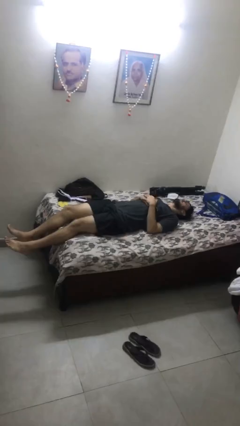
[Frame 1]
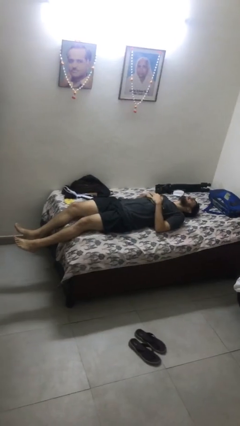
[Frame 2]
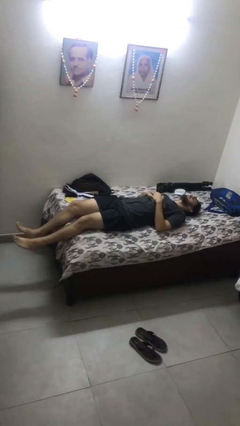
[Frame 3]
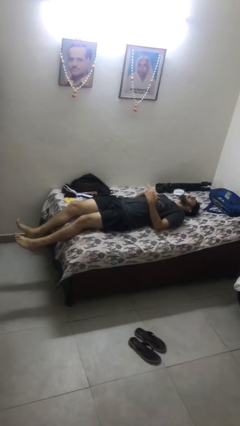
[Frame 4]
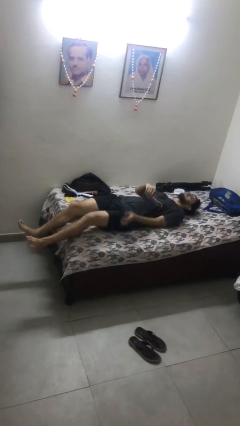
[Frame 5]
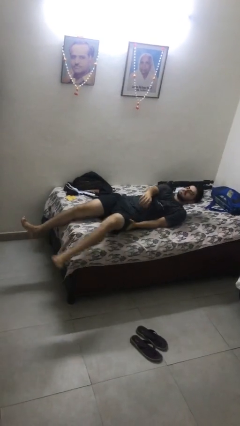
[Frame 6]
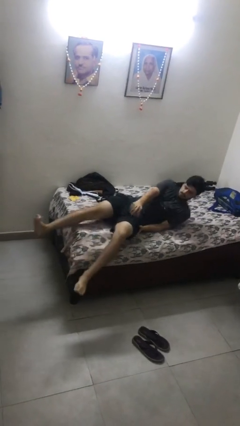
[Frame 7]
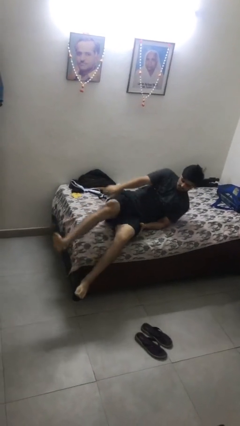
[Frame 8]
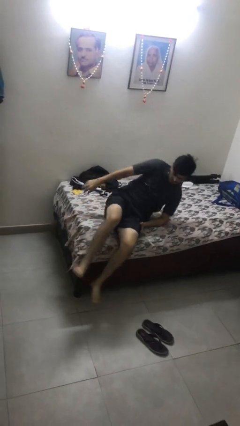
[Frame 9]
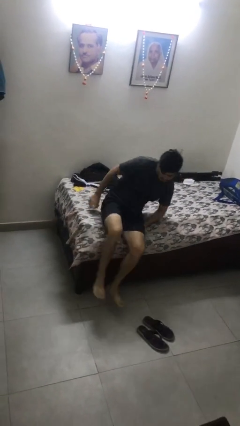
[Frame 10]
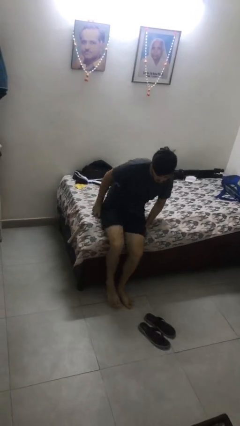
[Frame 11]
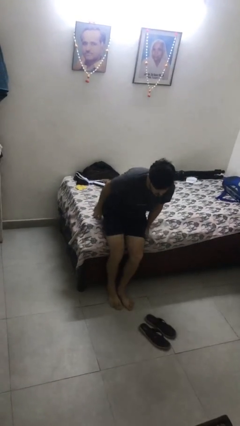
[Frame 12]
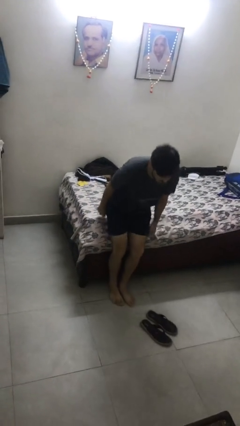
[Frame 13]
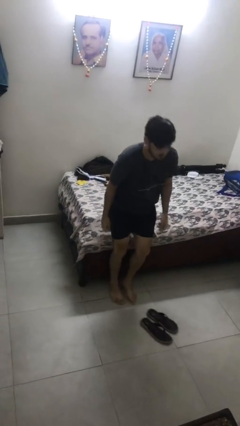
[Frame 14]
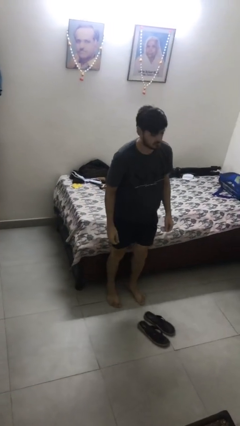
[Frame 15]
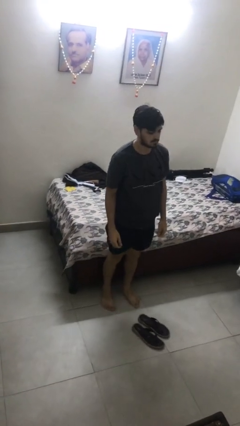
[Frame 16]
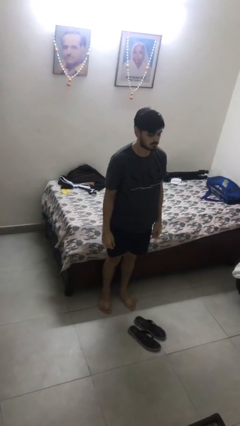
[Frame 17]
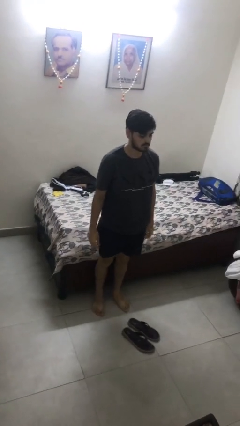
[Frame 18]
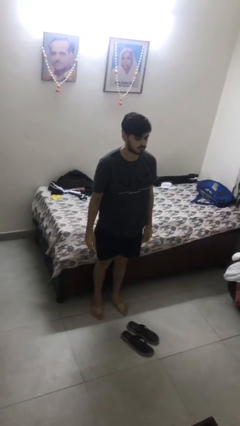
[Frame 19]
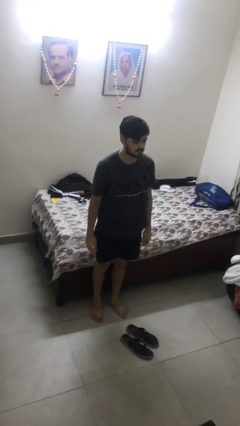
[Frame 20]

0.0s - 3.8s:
person stands up

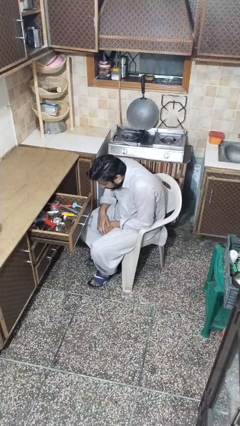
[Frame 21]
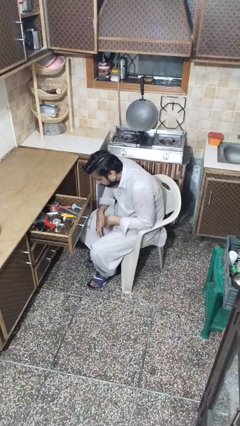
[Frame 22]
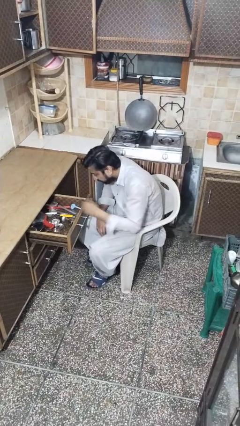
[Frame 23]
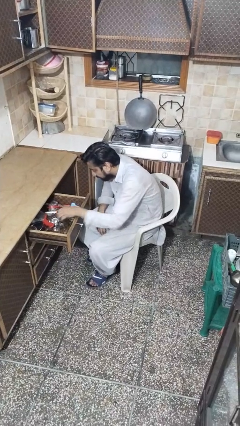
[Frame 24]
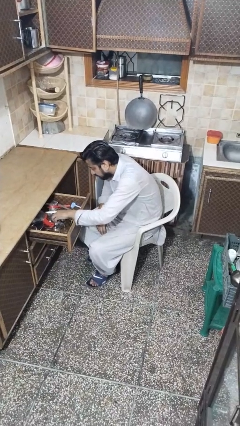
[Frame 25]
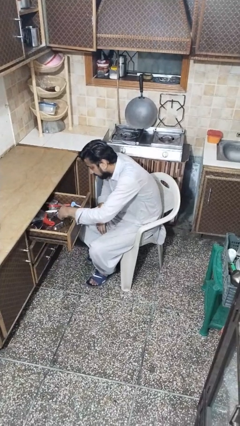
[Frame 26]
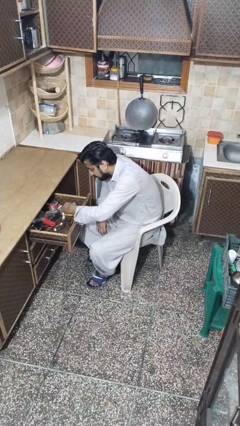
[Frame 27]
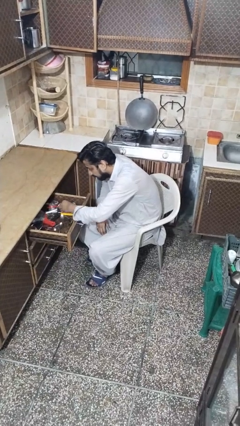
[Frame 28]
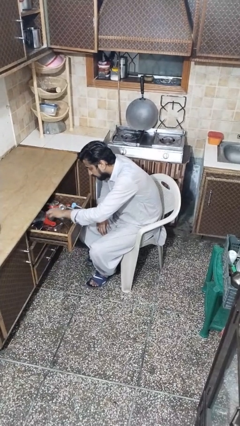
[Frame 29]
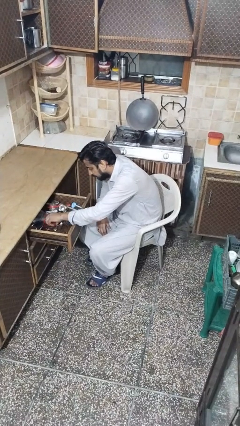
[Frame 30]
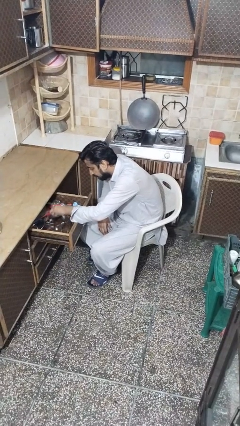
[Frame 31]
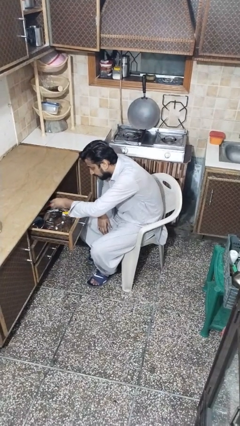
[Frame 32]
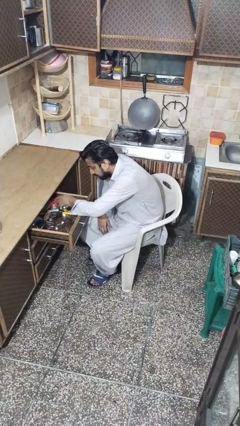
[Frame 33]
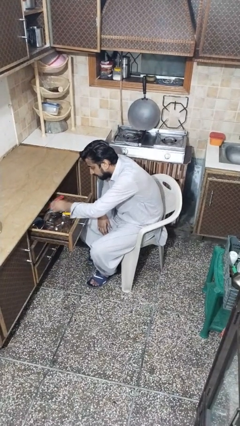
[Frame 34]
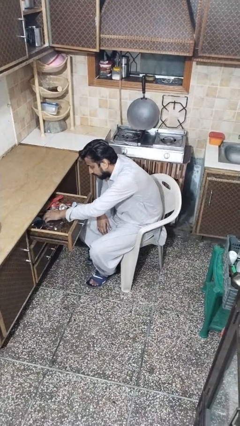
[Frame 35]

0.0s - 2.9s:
person searches in kitchen drawer

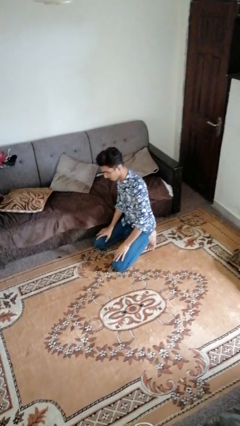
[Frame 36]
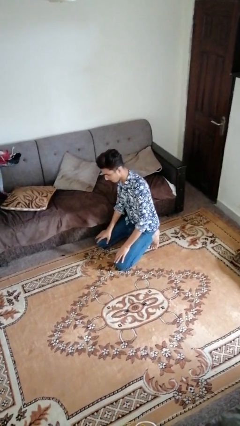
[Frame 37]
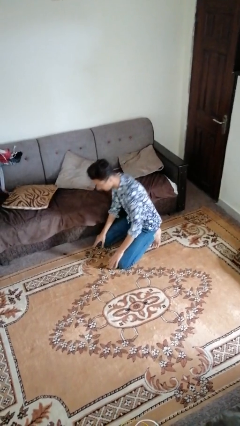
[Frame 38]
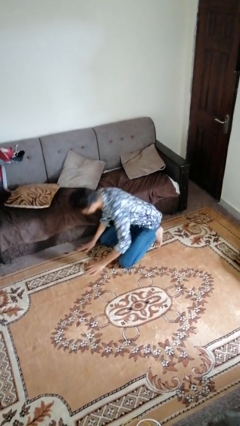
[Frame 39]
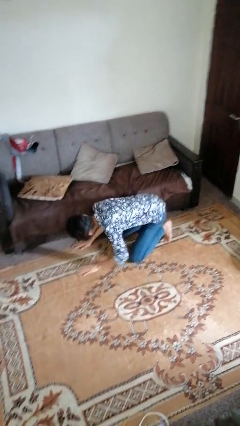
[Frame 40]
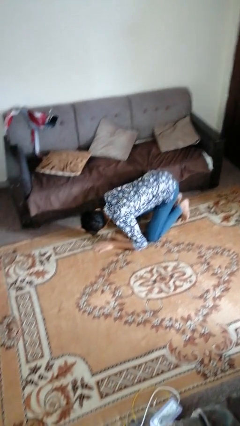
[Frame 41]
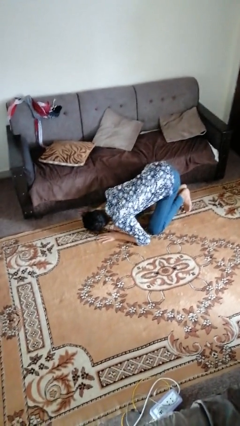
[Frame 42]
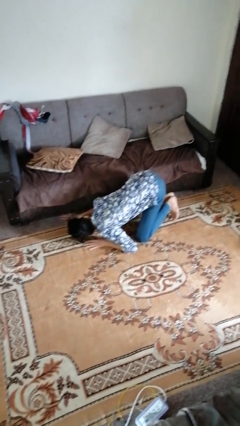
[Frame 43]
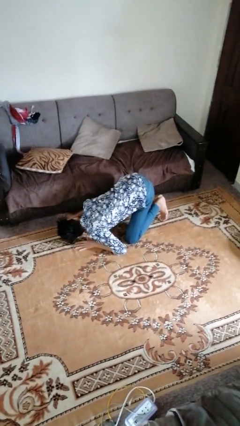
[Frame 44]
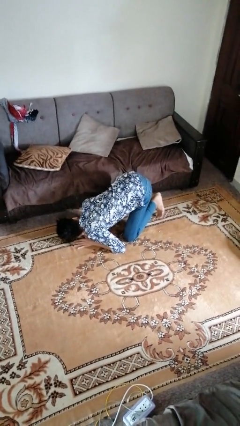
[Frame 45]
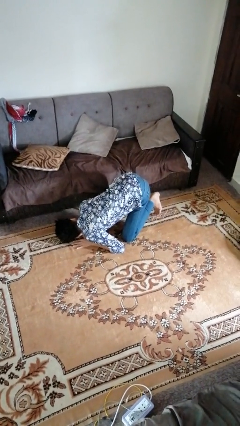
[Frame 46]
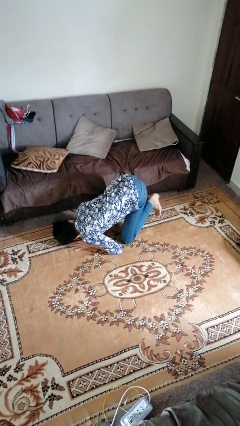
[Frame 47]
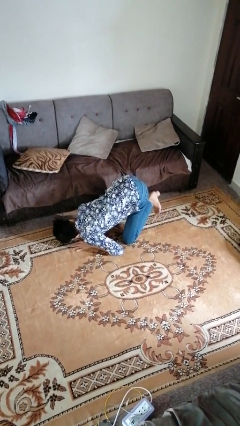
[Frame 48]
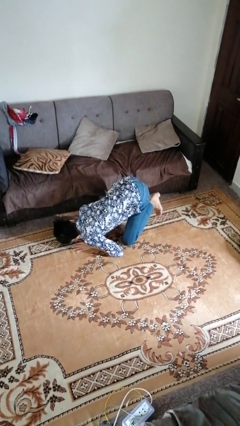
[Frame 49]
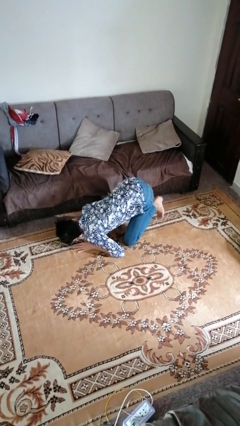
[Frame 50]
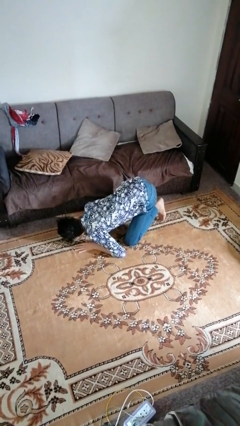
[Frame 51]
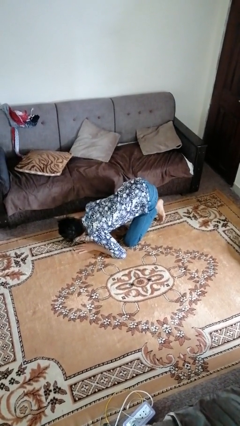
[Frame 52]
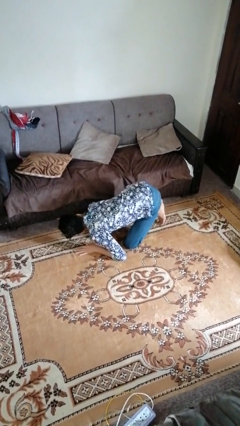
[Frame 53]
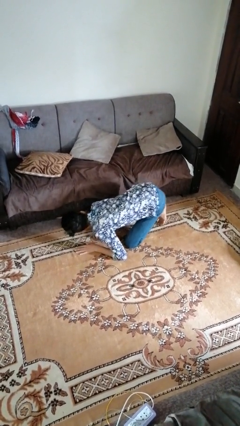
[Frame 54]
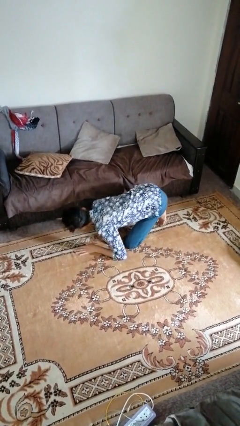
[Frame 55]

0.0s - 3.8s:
person searches under couch

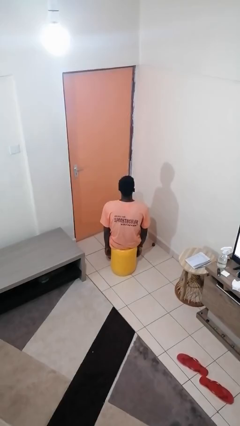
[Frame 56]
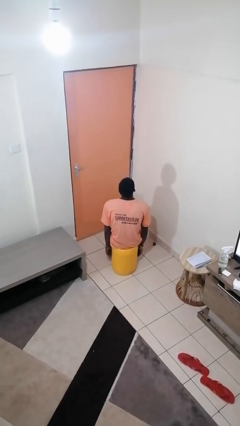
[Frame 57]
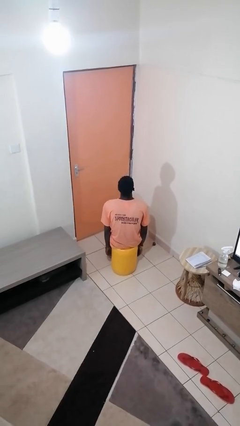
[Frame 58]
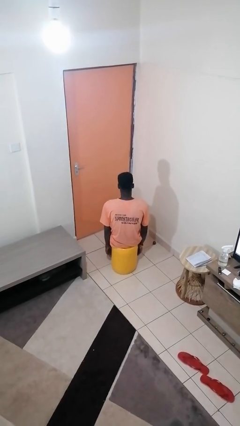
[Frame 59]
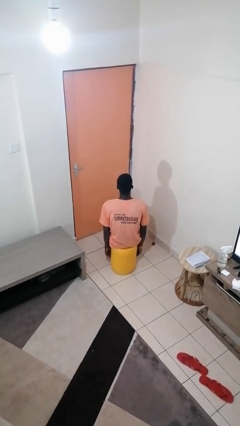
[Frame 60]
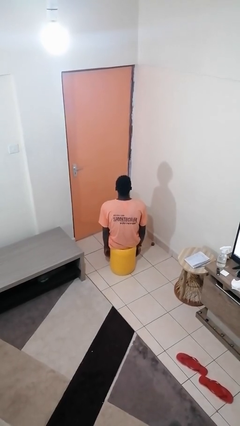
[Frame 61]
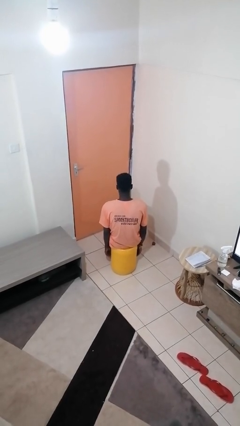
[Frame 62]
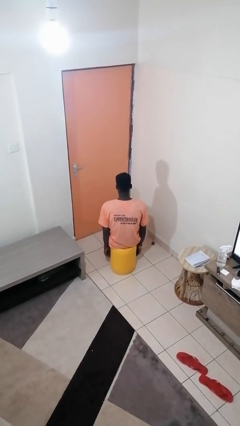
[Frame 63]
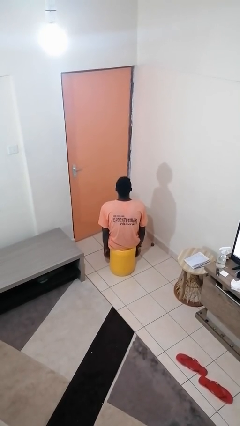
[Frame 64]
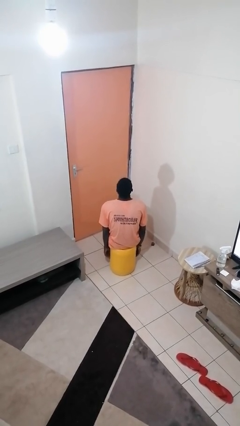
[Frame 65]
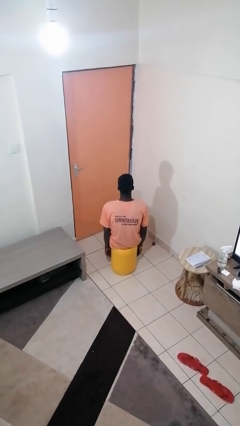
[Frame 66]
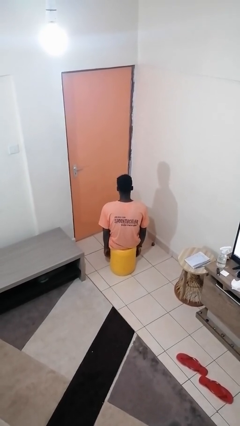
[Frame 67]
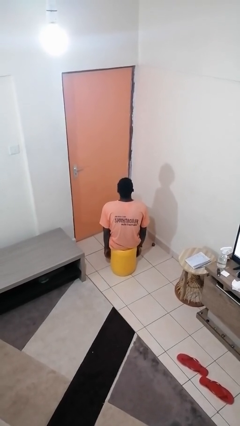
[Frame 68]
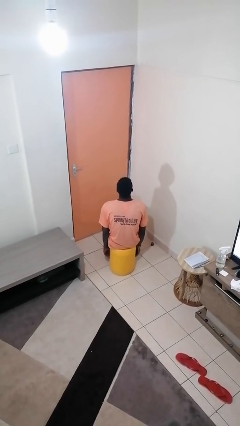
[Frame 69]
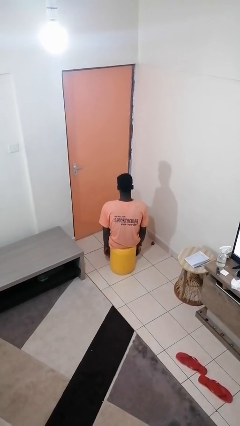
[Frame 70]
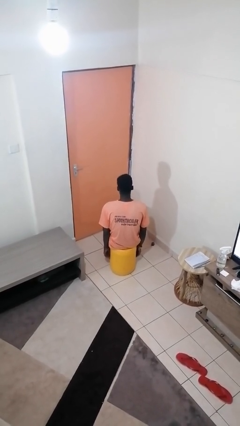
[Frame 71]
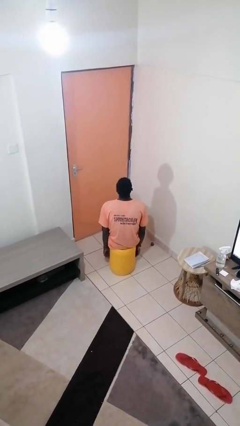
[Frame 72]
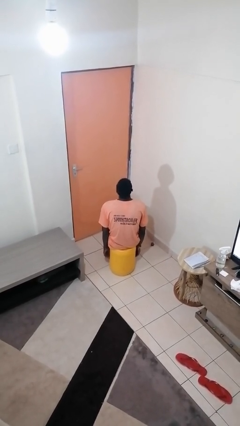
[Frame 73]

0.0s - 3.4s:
person nods head

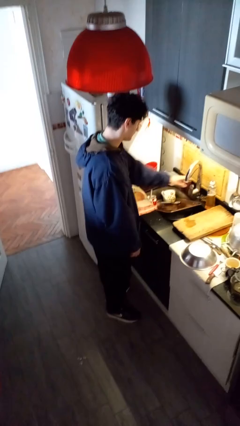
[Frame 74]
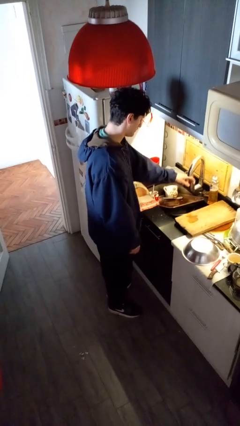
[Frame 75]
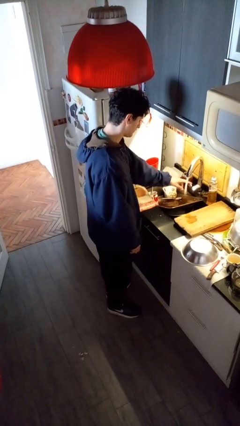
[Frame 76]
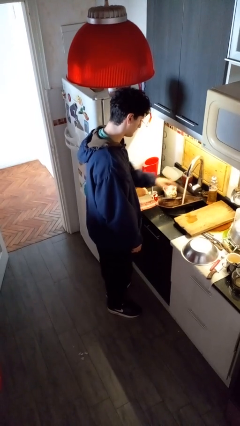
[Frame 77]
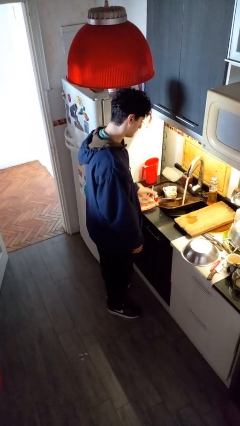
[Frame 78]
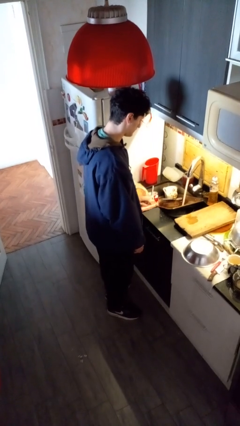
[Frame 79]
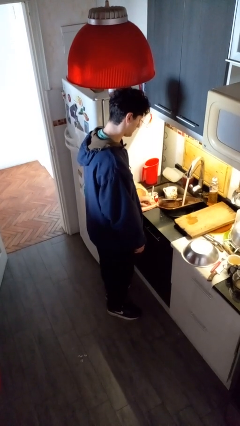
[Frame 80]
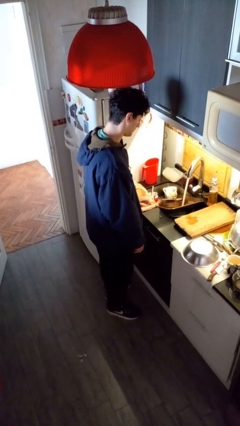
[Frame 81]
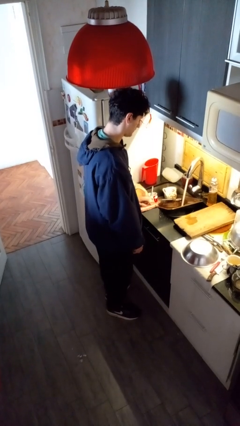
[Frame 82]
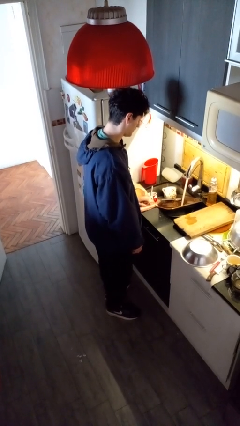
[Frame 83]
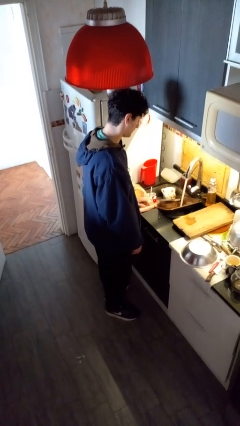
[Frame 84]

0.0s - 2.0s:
person turns on faucet

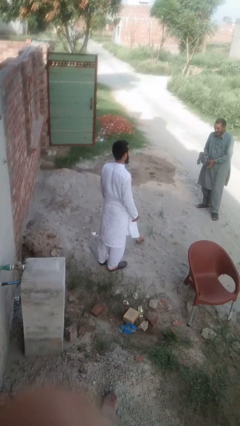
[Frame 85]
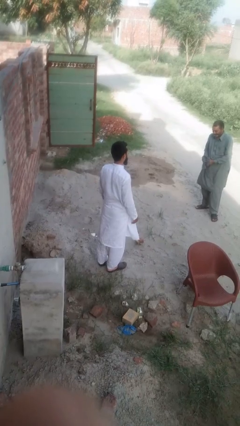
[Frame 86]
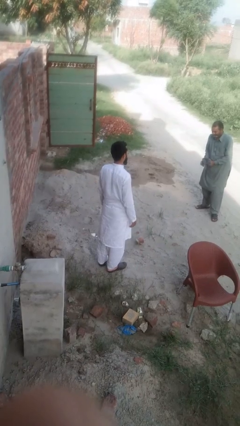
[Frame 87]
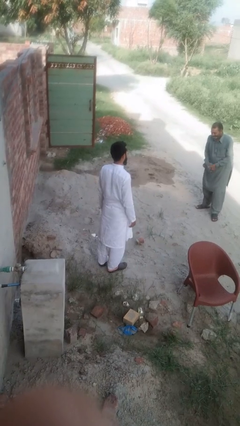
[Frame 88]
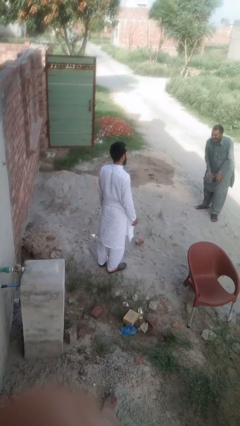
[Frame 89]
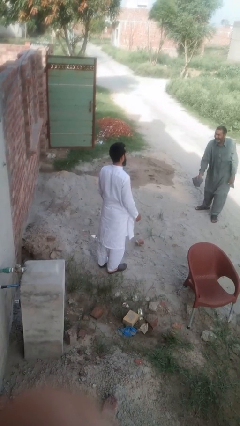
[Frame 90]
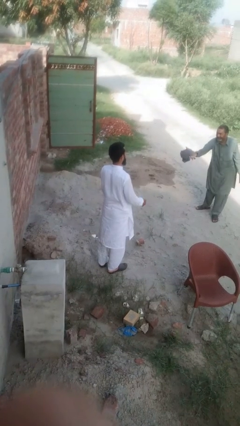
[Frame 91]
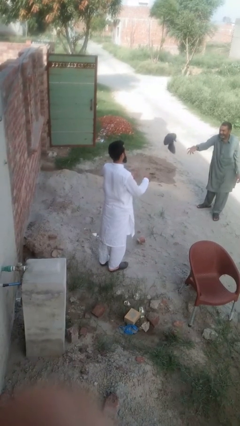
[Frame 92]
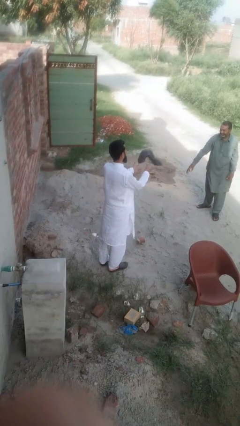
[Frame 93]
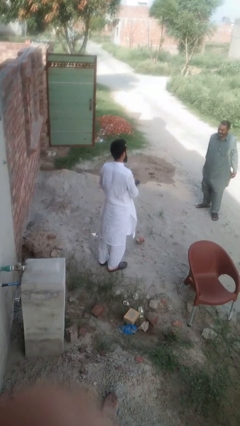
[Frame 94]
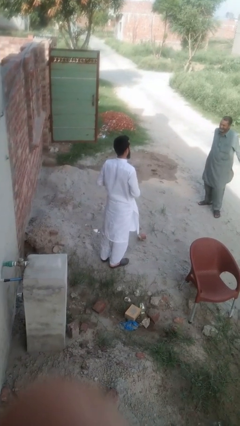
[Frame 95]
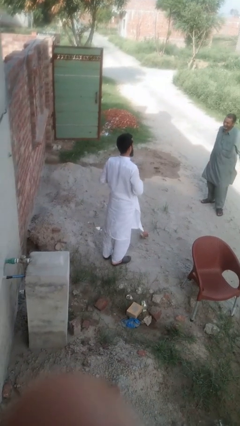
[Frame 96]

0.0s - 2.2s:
person catches object from person
